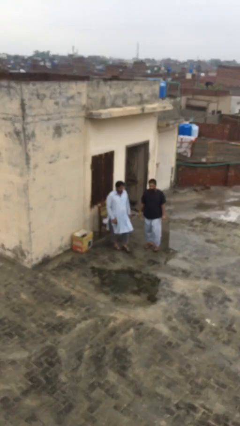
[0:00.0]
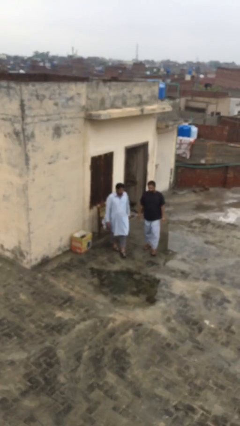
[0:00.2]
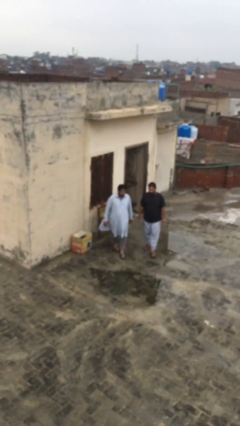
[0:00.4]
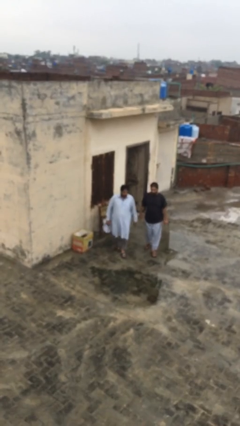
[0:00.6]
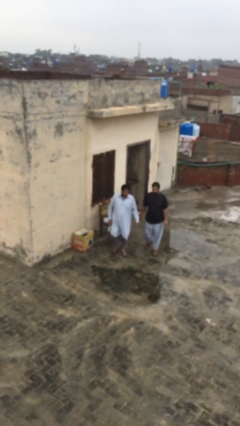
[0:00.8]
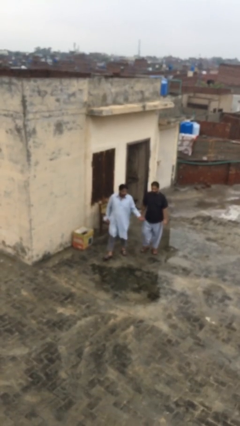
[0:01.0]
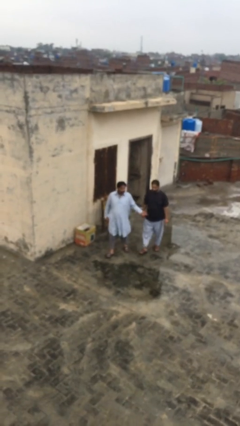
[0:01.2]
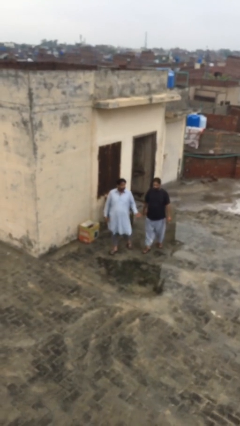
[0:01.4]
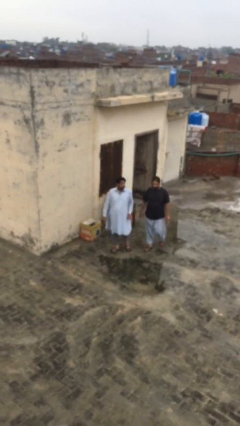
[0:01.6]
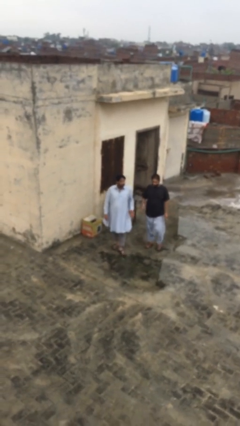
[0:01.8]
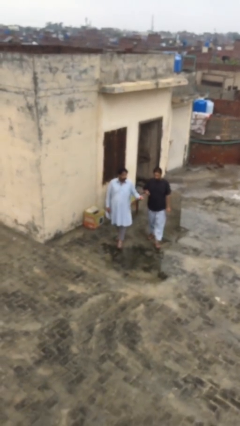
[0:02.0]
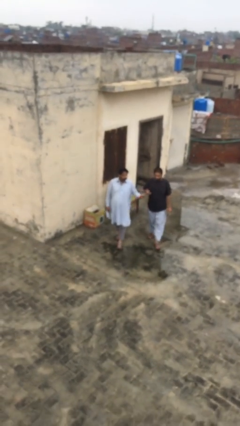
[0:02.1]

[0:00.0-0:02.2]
person talks to person

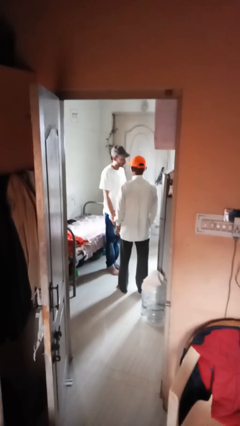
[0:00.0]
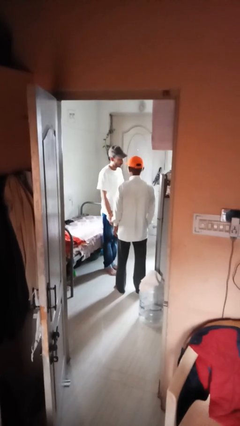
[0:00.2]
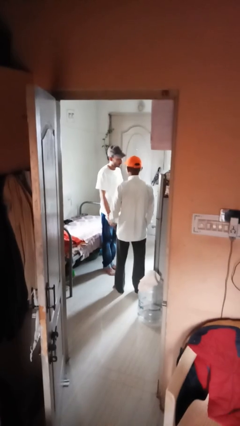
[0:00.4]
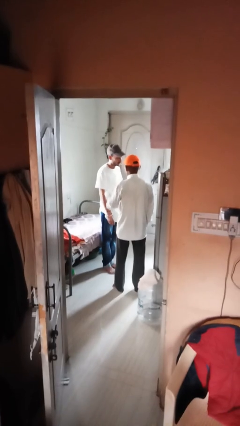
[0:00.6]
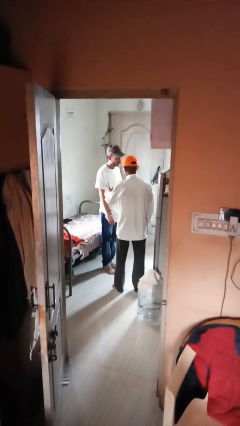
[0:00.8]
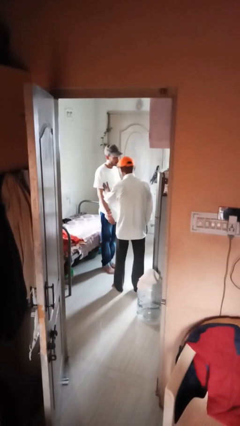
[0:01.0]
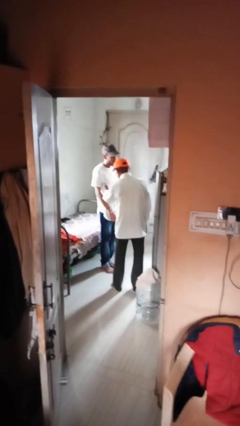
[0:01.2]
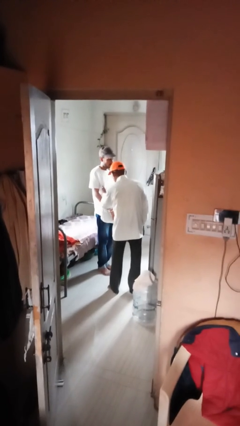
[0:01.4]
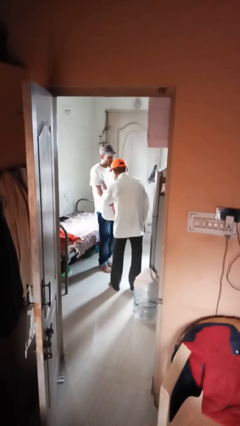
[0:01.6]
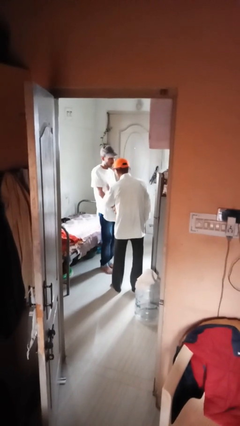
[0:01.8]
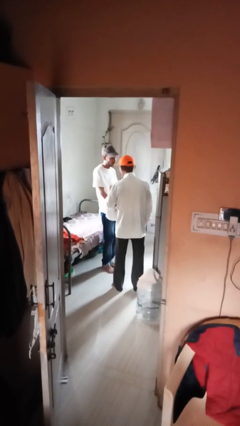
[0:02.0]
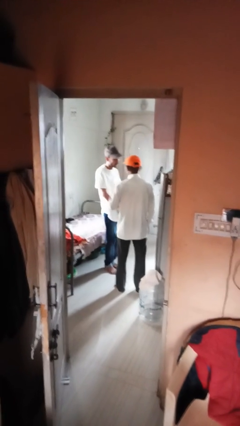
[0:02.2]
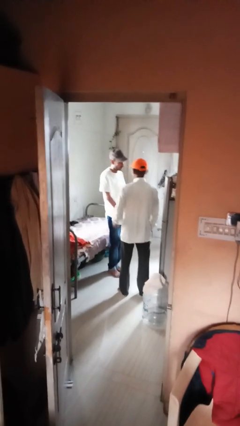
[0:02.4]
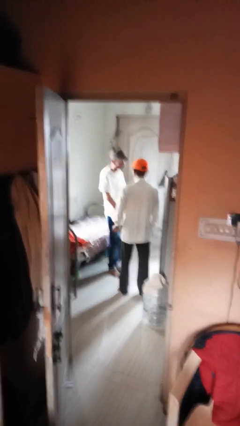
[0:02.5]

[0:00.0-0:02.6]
person tickles person

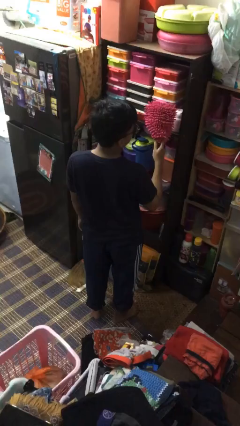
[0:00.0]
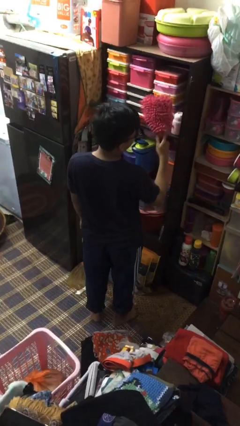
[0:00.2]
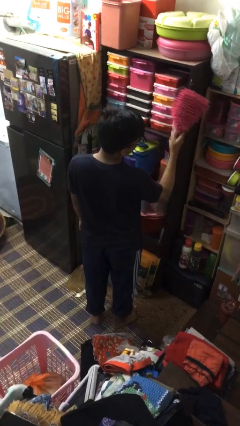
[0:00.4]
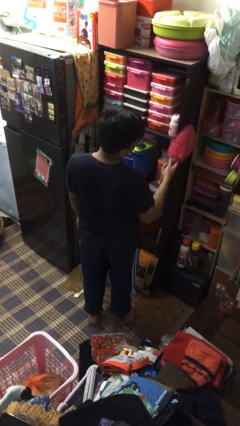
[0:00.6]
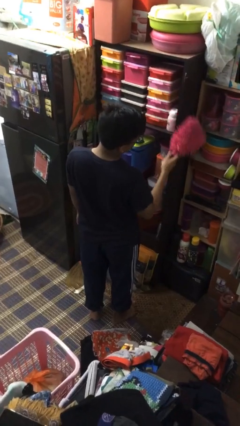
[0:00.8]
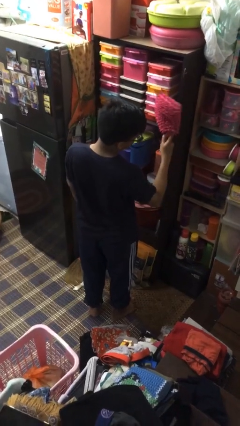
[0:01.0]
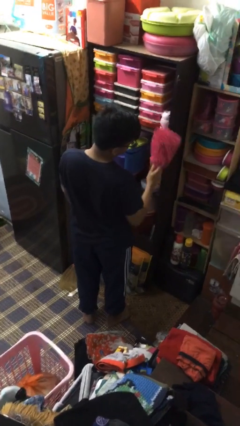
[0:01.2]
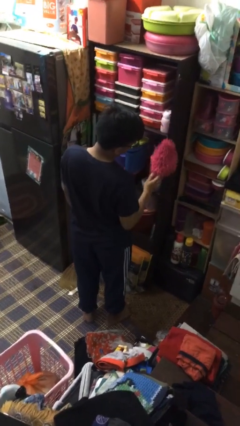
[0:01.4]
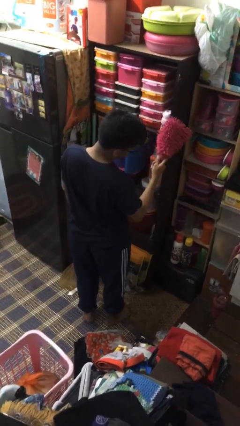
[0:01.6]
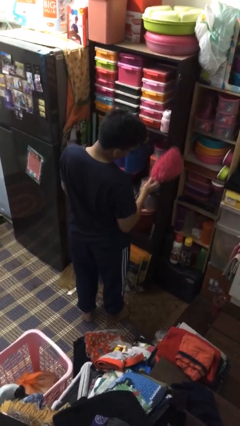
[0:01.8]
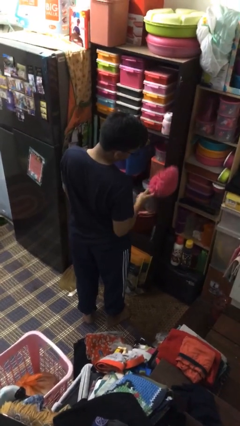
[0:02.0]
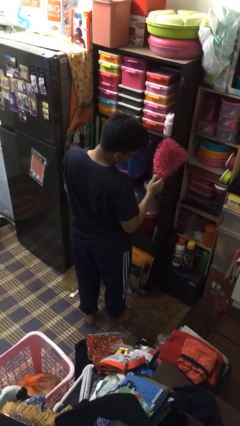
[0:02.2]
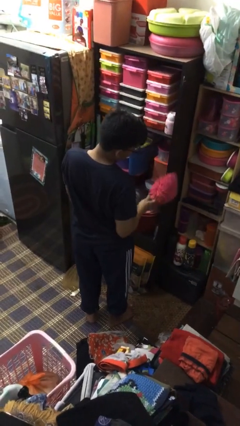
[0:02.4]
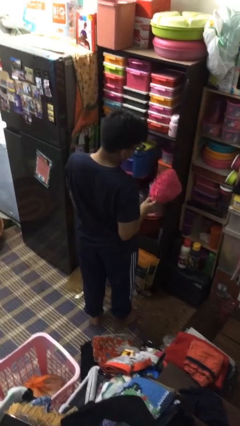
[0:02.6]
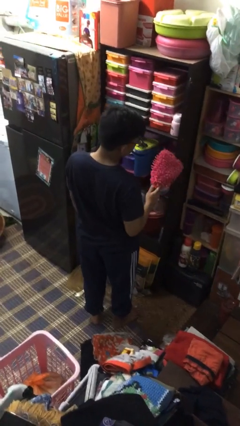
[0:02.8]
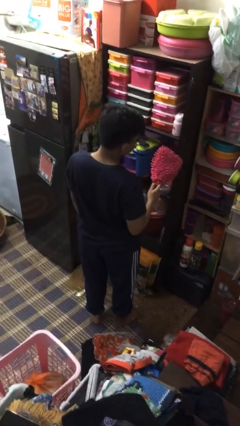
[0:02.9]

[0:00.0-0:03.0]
person dusts furniture

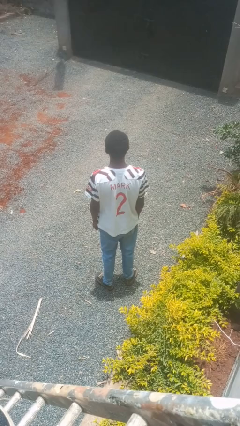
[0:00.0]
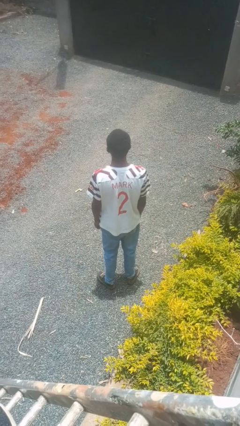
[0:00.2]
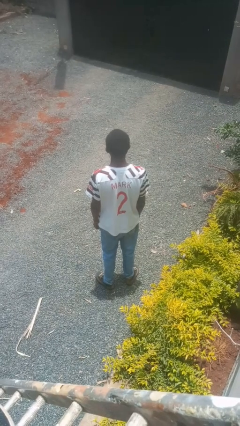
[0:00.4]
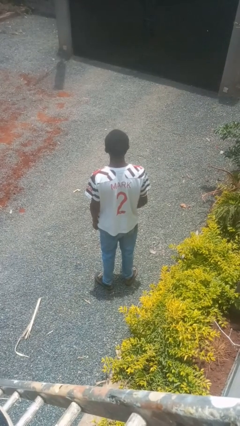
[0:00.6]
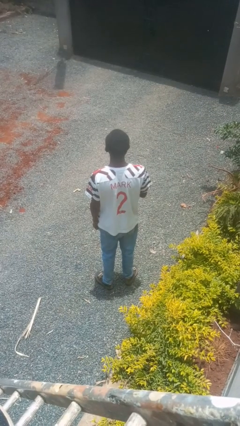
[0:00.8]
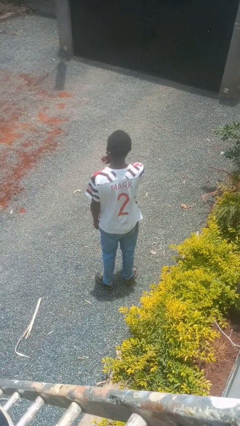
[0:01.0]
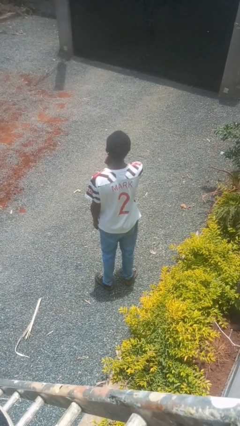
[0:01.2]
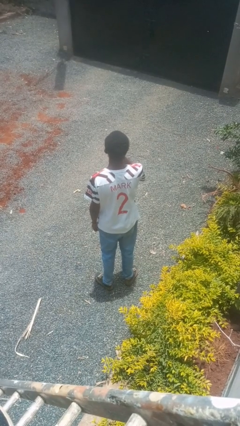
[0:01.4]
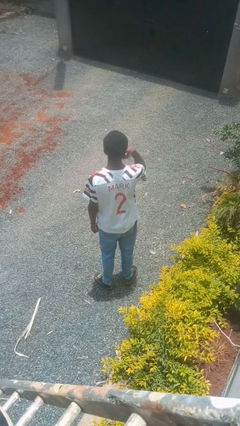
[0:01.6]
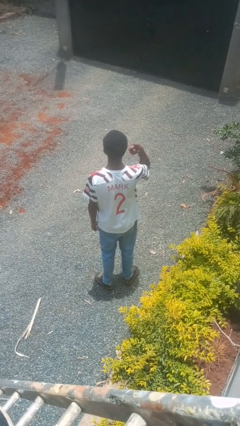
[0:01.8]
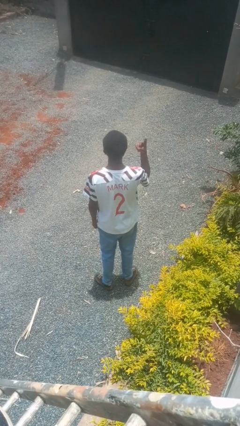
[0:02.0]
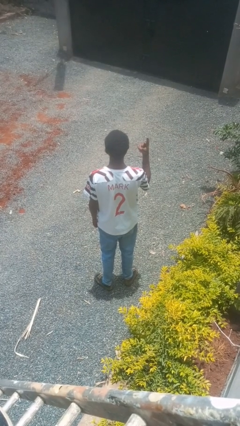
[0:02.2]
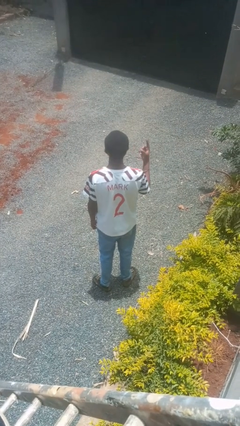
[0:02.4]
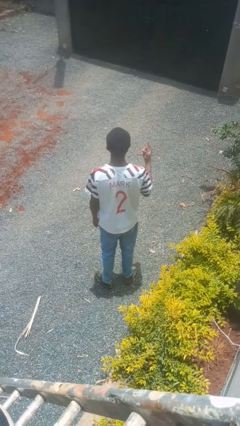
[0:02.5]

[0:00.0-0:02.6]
person gestures cut

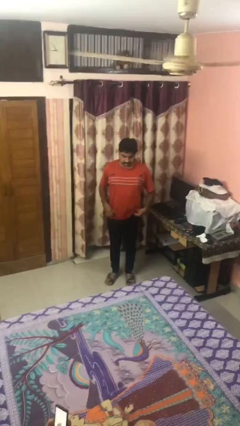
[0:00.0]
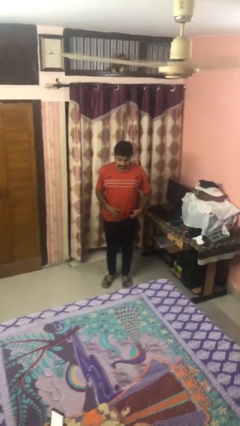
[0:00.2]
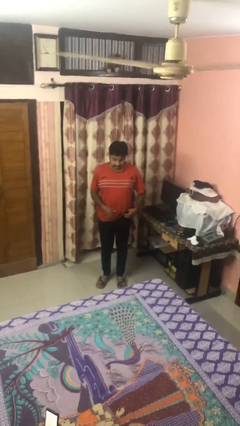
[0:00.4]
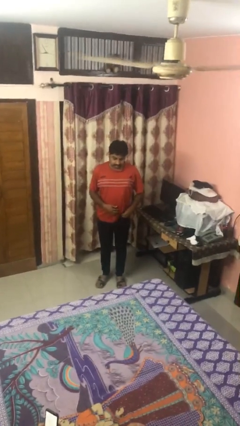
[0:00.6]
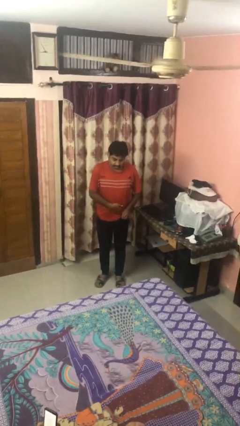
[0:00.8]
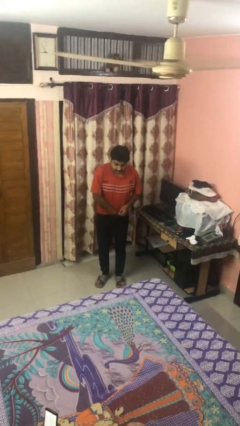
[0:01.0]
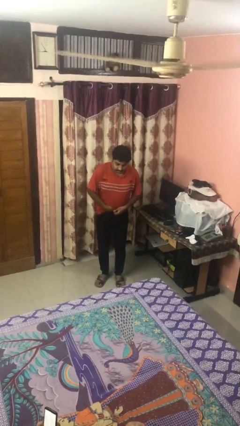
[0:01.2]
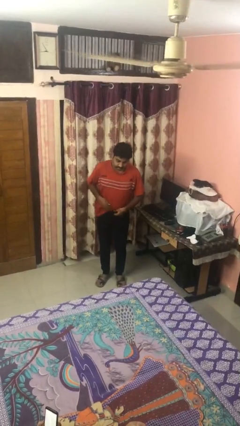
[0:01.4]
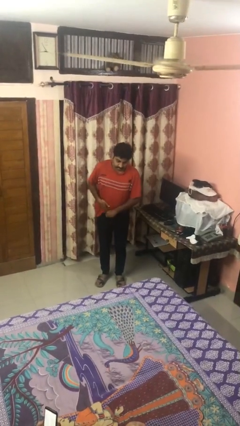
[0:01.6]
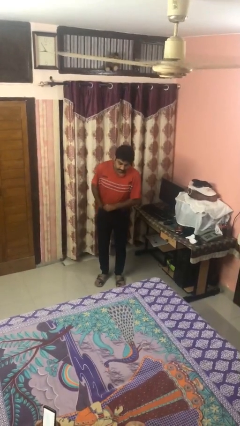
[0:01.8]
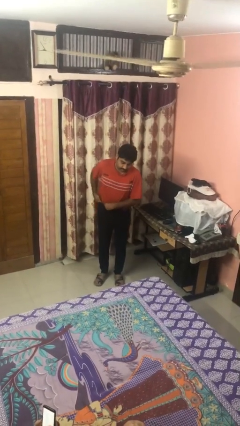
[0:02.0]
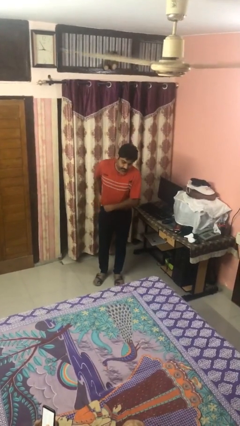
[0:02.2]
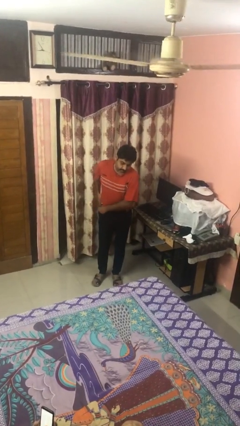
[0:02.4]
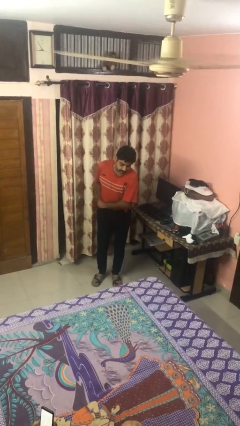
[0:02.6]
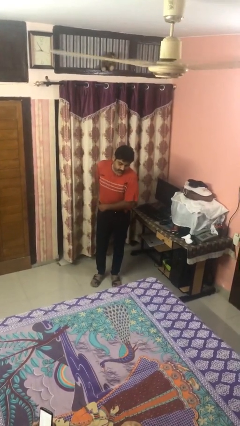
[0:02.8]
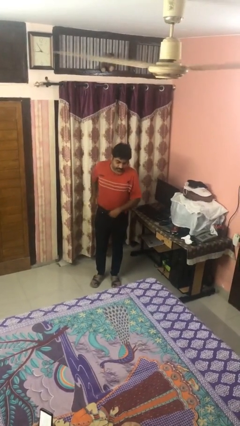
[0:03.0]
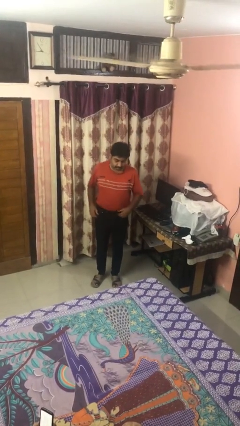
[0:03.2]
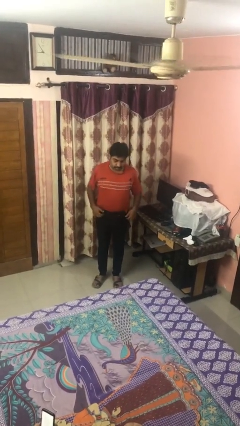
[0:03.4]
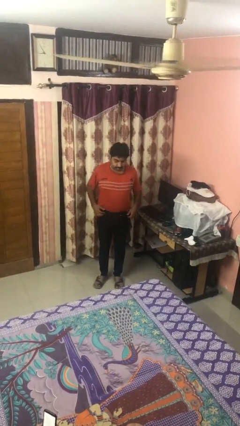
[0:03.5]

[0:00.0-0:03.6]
person tucks in shirt

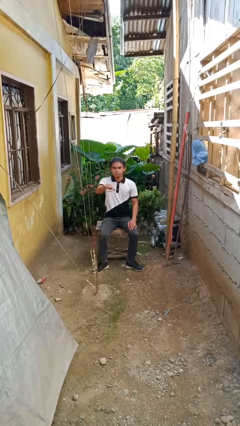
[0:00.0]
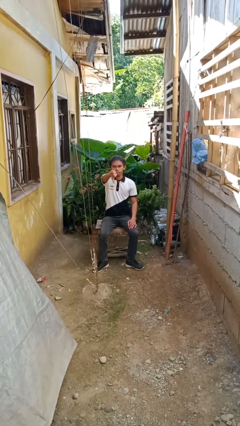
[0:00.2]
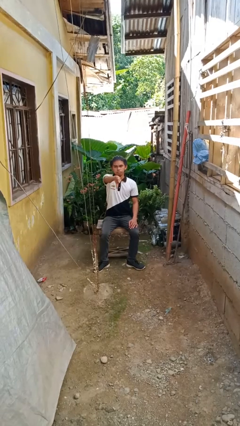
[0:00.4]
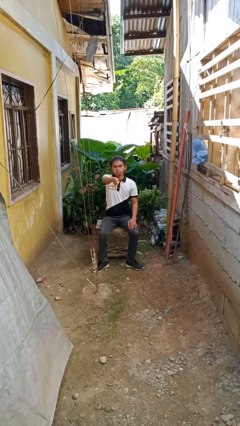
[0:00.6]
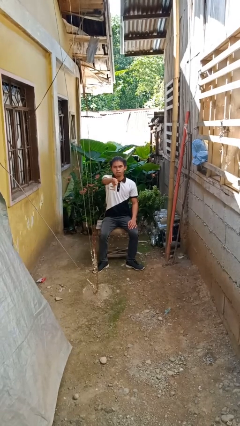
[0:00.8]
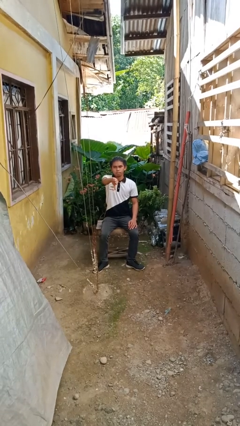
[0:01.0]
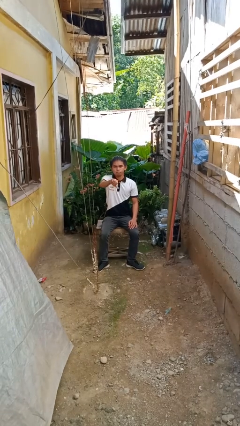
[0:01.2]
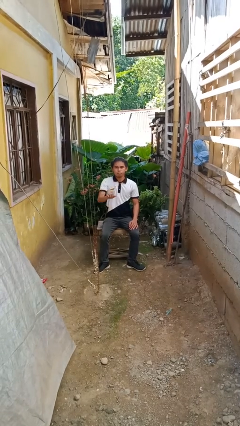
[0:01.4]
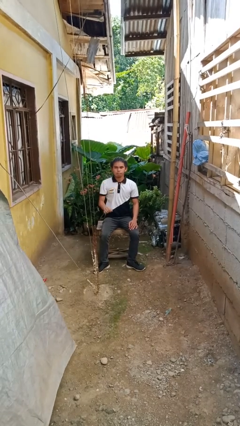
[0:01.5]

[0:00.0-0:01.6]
person gestures thumbs down

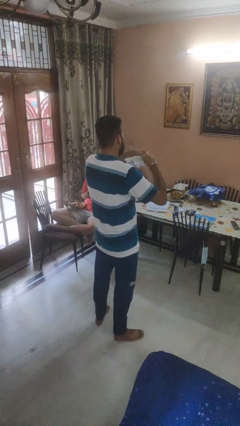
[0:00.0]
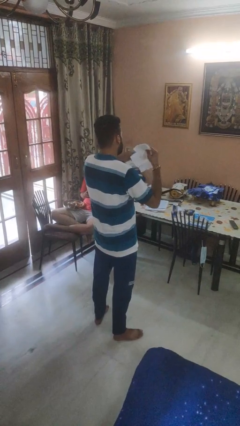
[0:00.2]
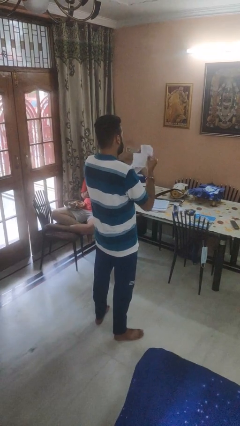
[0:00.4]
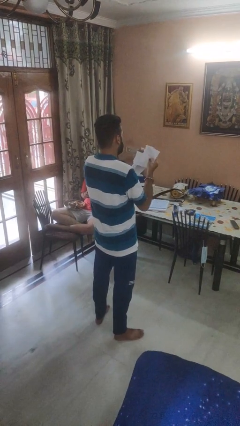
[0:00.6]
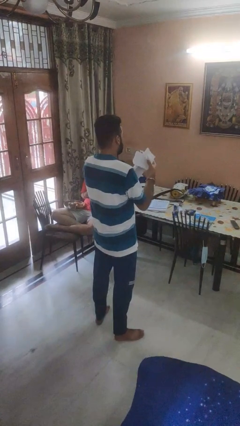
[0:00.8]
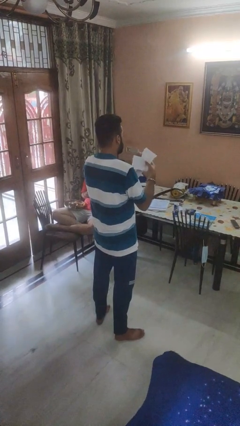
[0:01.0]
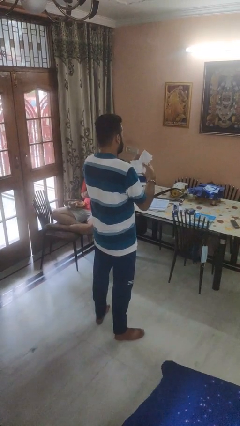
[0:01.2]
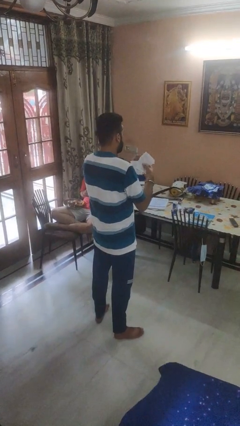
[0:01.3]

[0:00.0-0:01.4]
person tears paper
